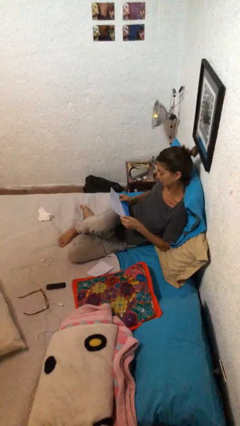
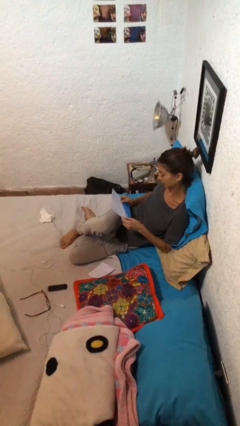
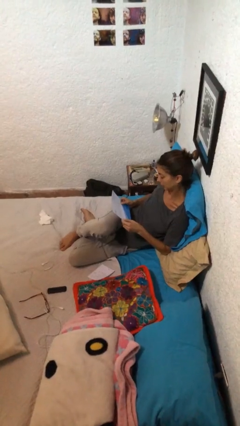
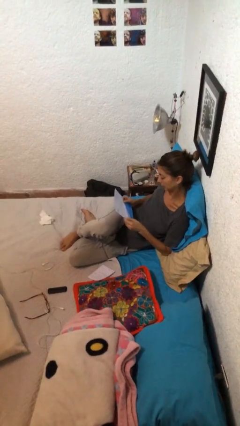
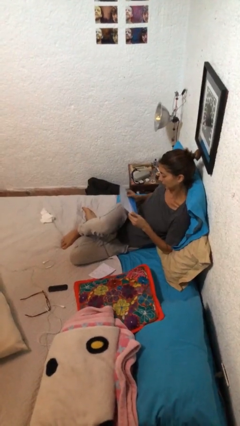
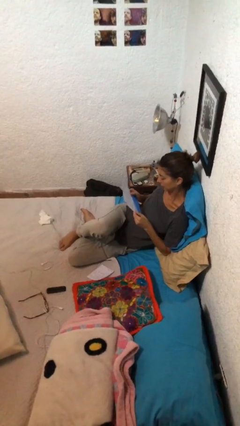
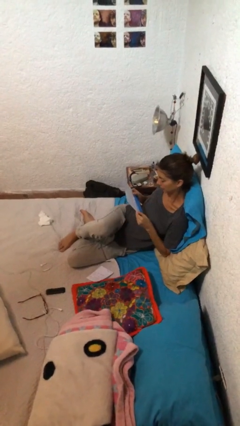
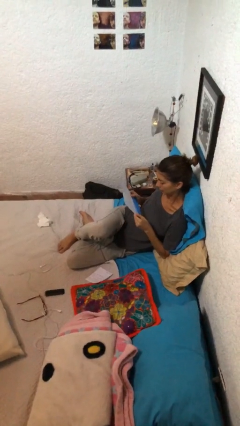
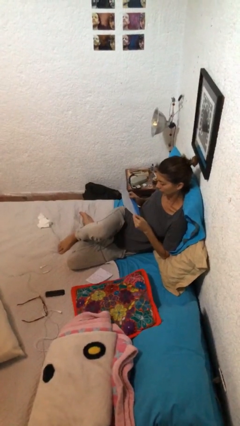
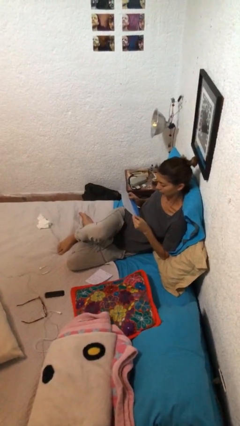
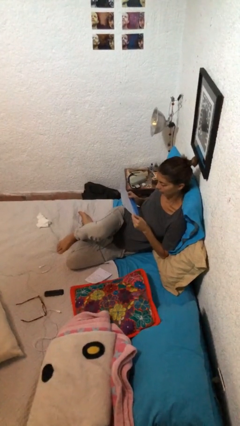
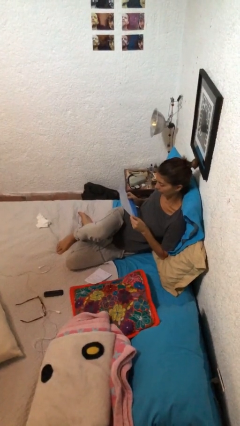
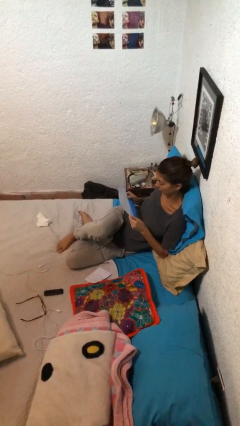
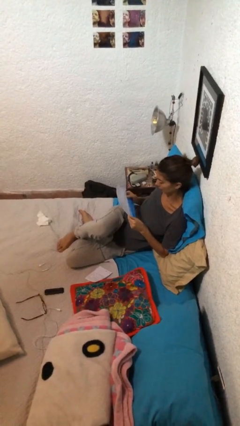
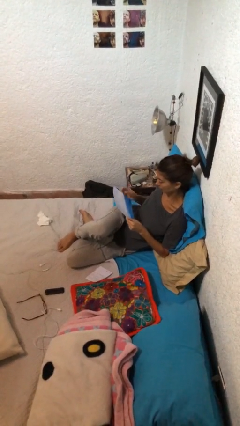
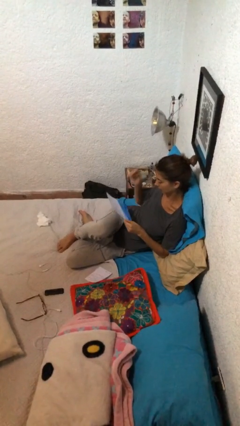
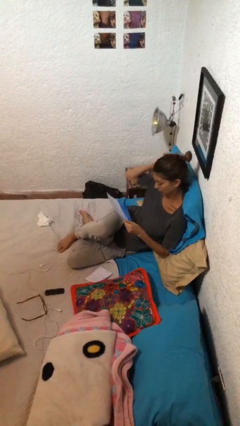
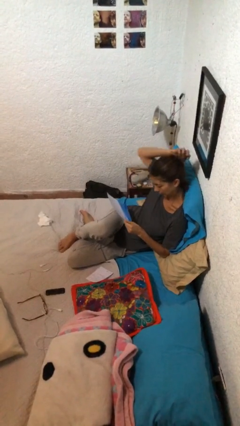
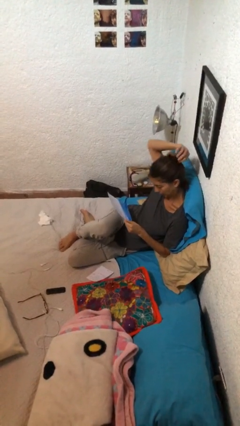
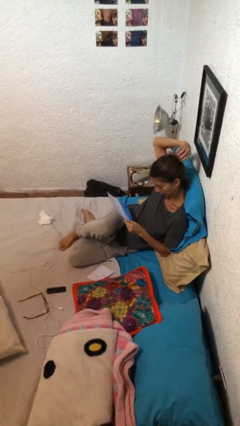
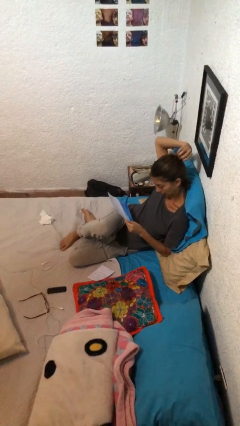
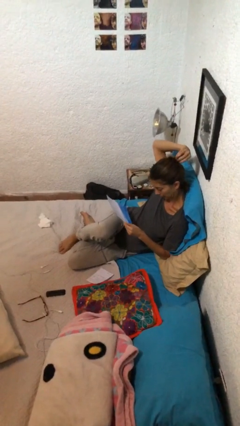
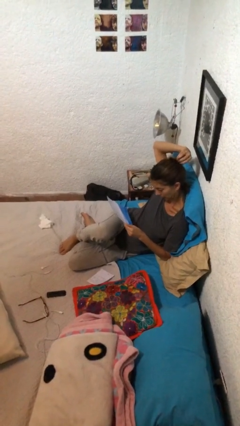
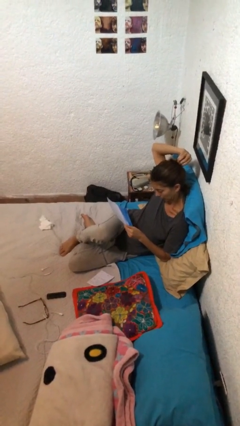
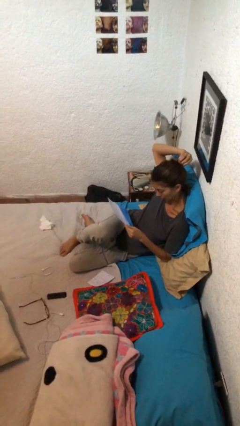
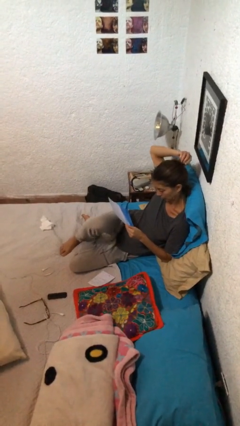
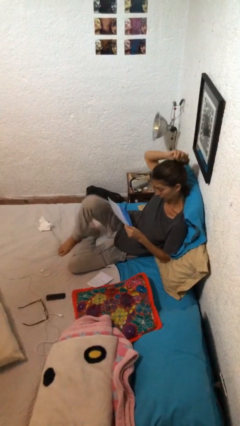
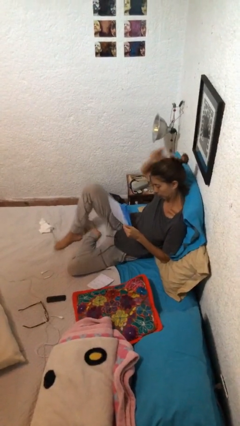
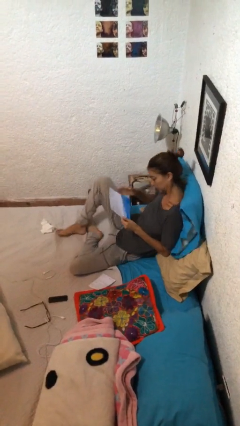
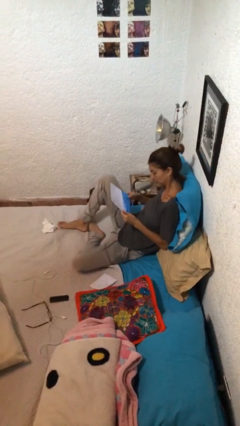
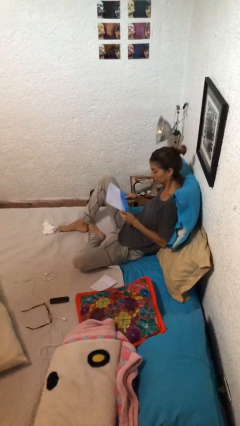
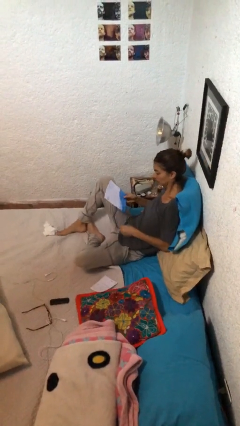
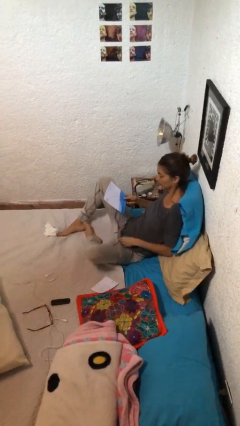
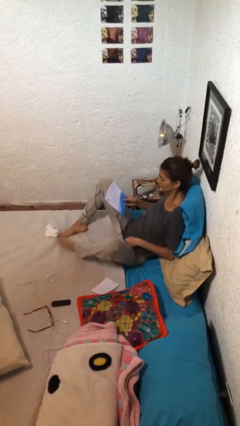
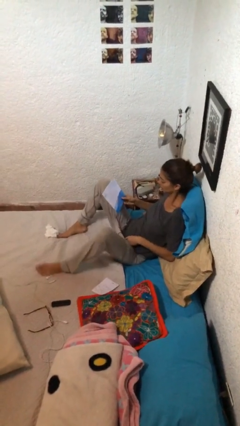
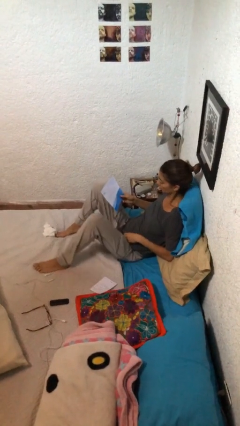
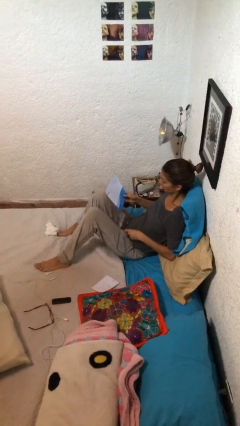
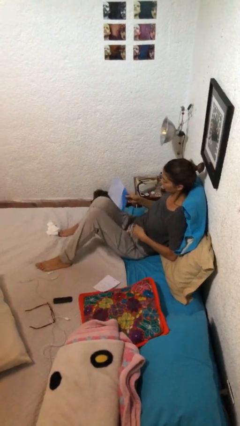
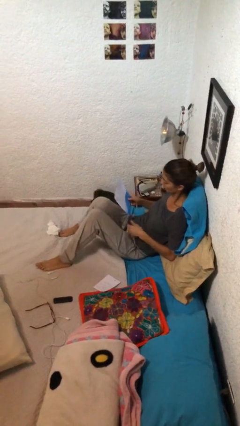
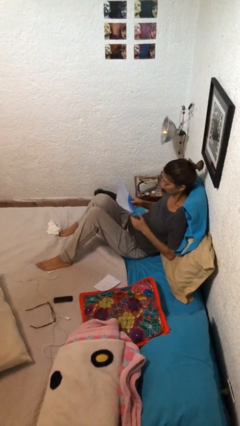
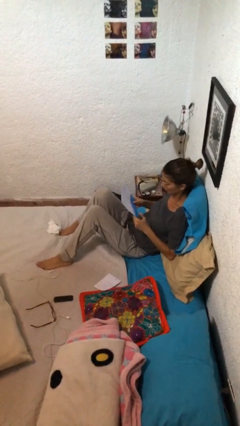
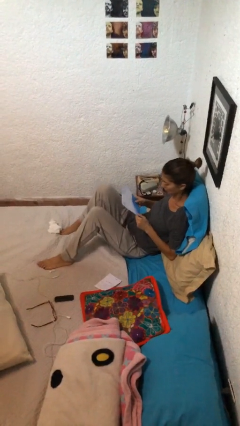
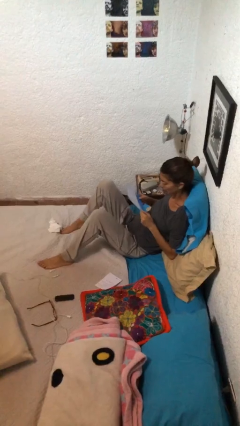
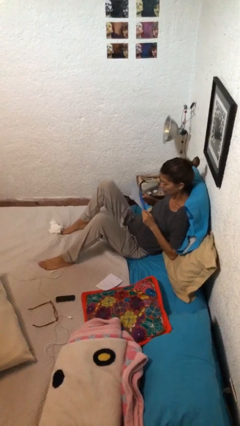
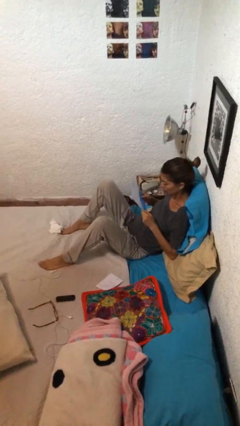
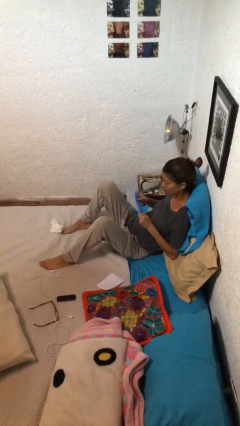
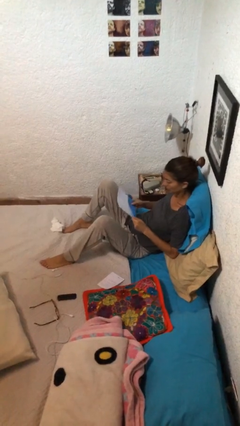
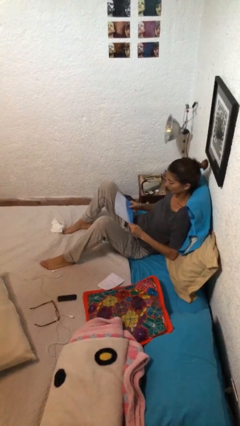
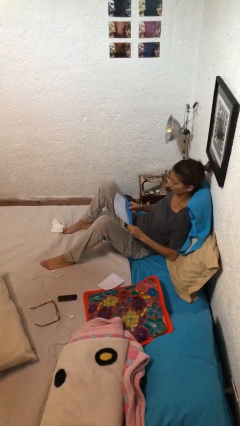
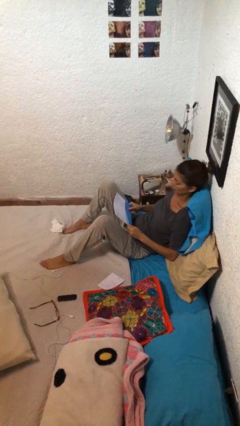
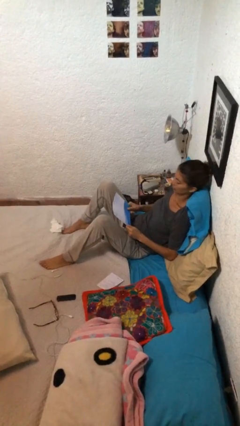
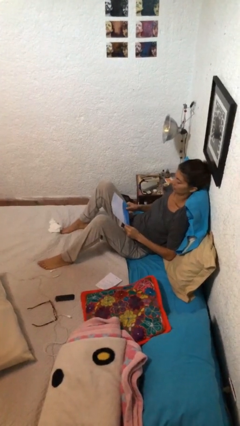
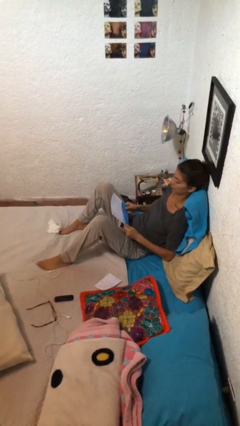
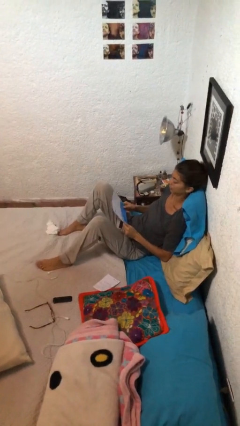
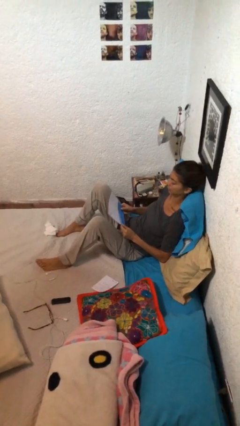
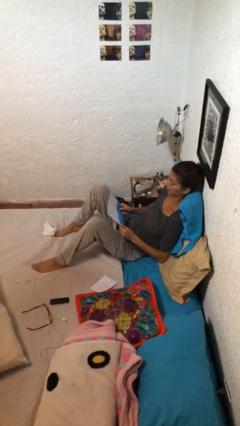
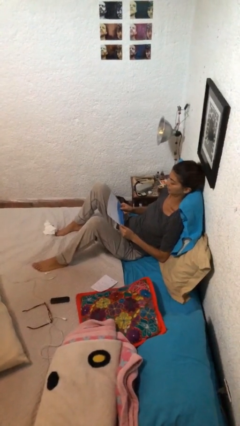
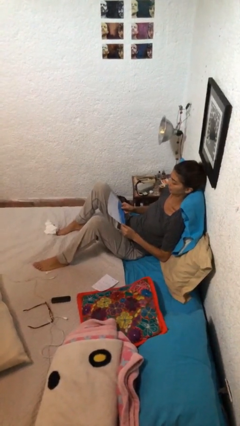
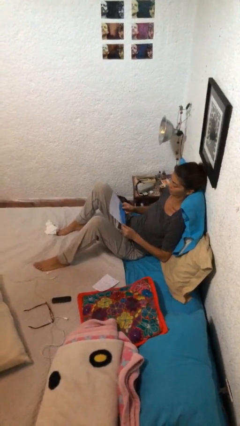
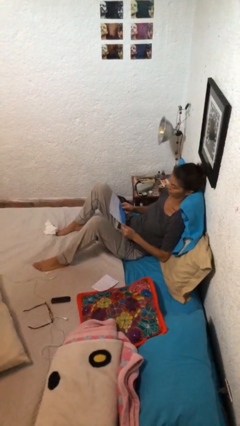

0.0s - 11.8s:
person reads document

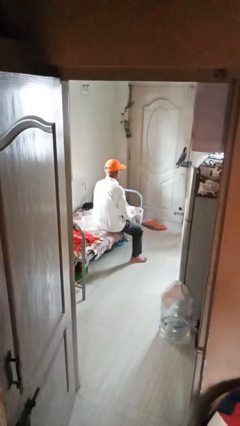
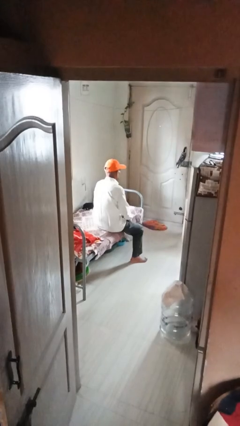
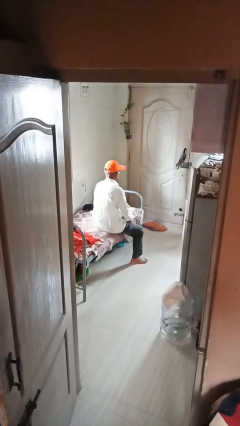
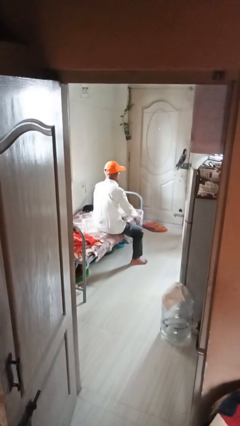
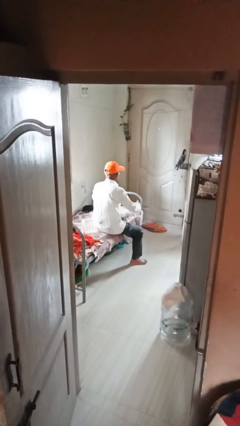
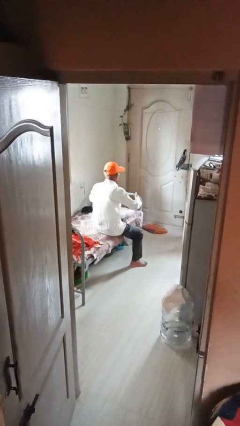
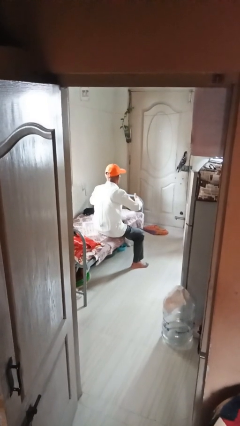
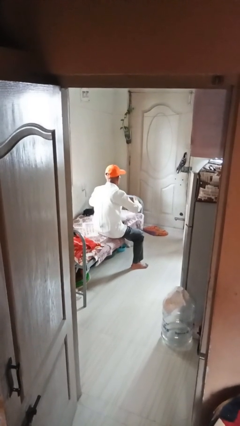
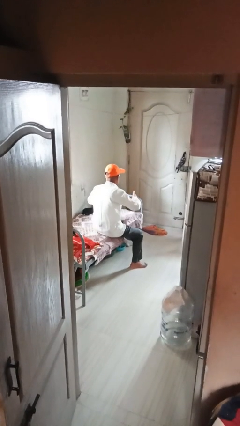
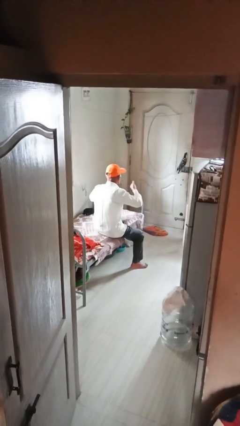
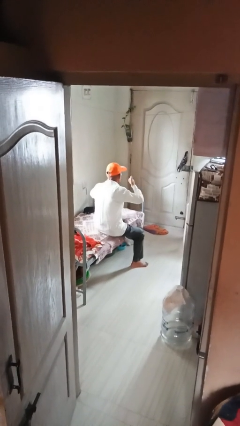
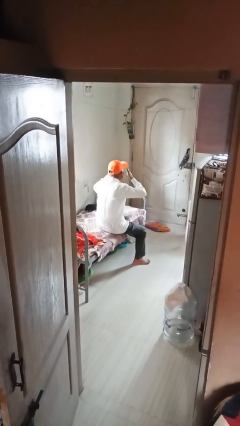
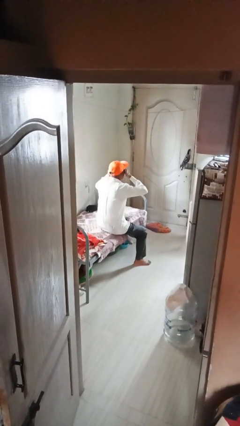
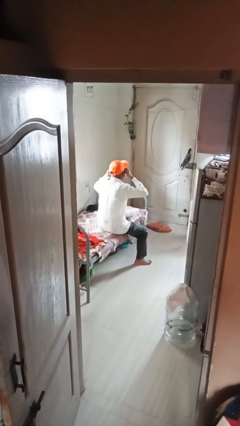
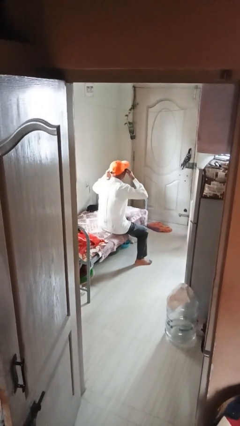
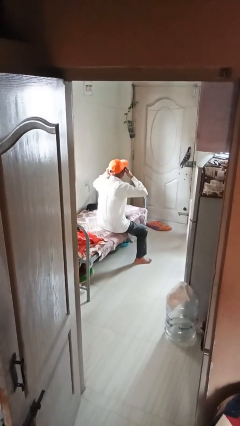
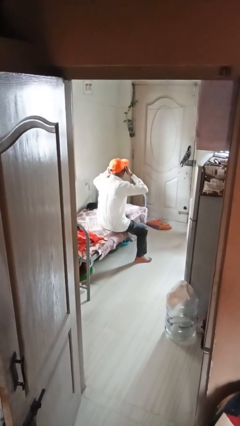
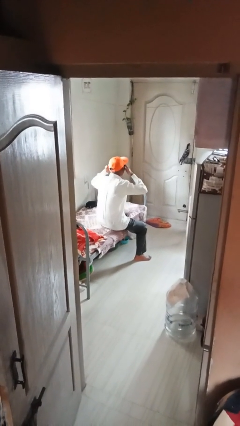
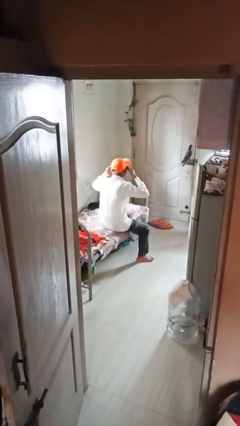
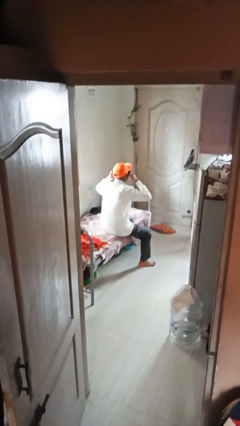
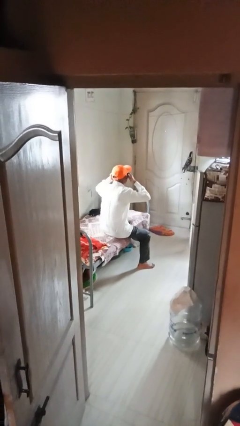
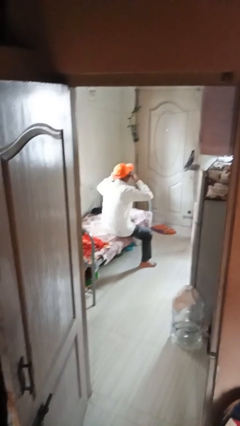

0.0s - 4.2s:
person rubs eyes

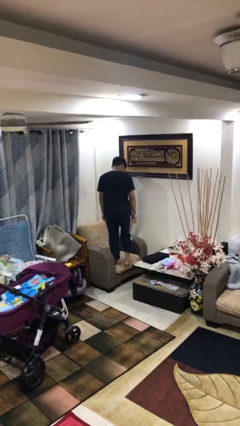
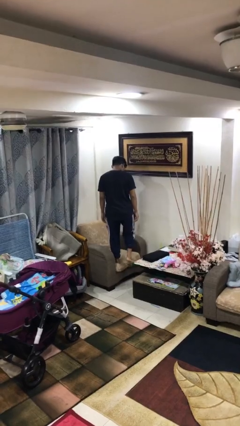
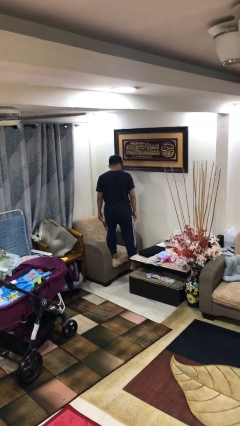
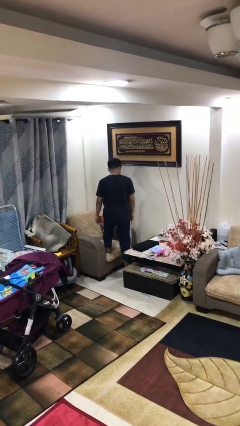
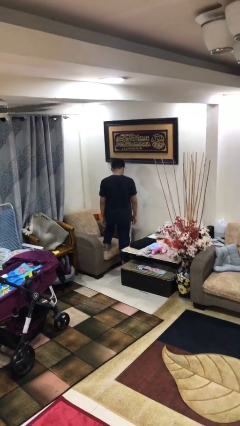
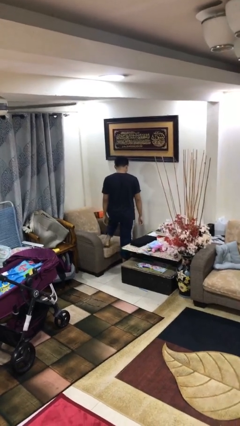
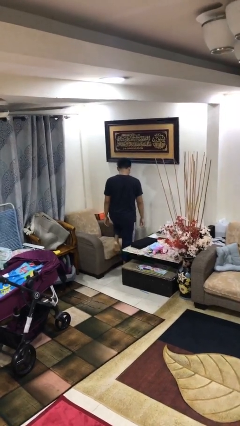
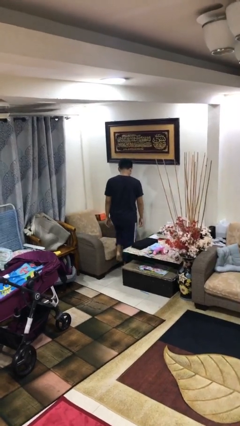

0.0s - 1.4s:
person climbs off couch

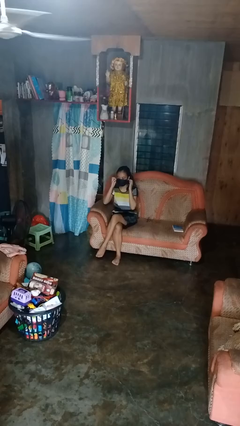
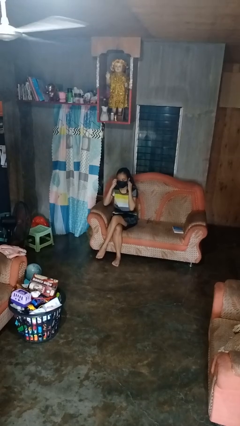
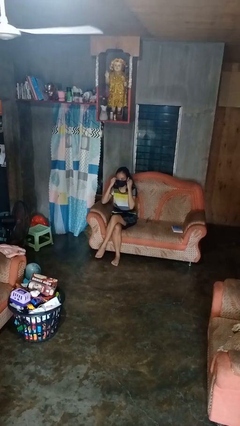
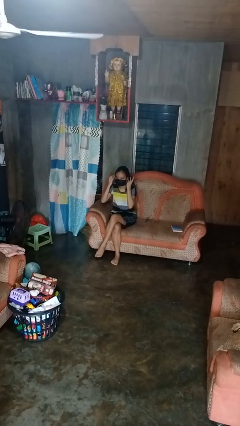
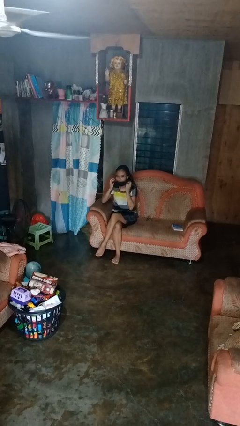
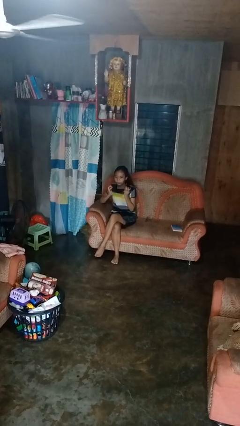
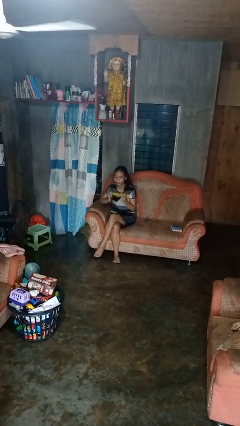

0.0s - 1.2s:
person takes off facemask
